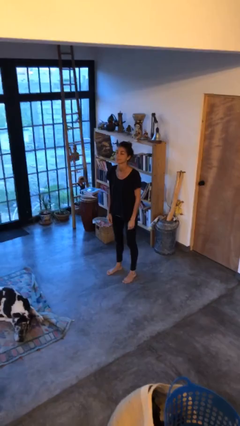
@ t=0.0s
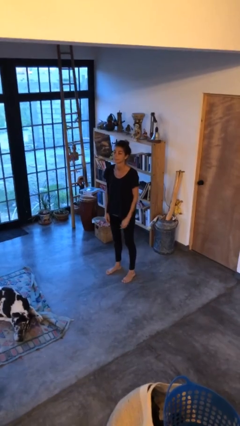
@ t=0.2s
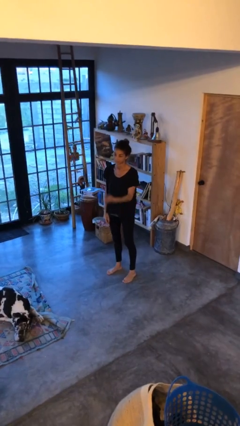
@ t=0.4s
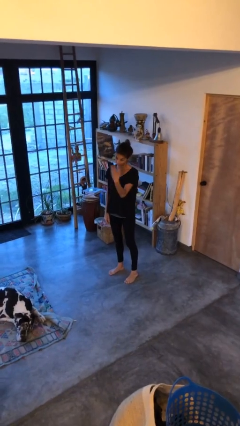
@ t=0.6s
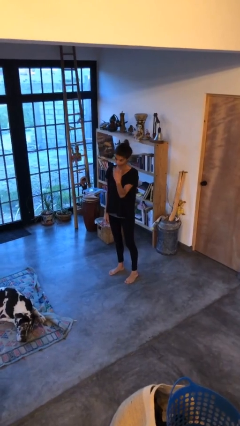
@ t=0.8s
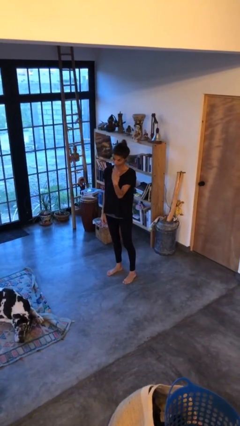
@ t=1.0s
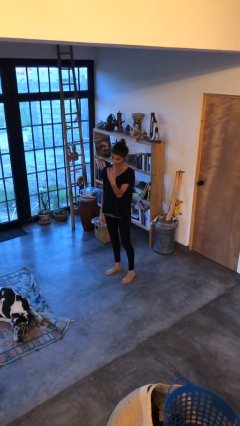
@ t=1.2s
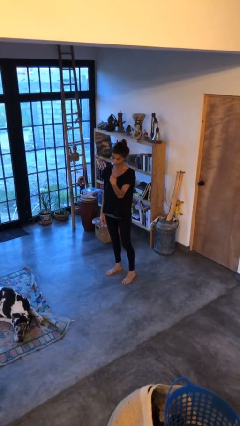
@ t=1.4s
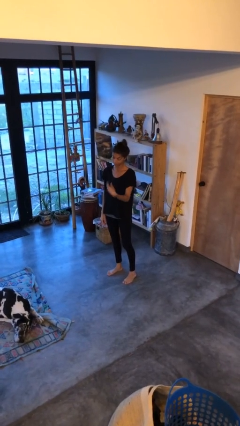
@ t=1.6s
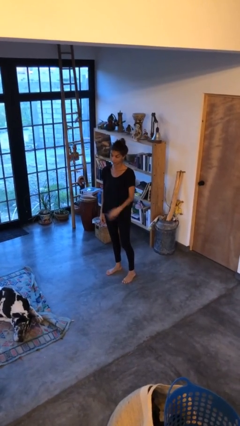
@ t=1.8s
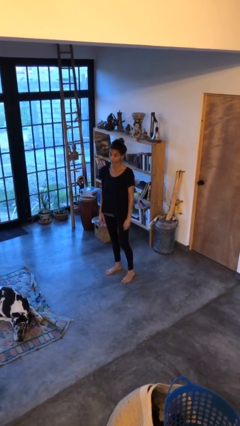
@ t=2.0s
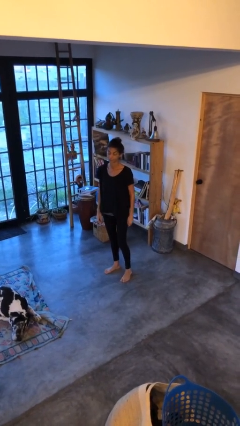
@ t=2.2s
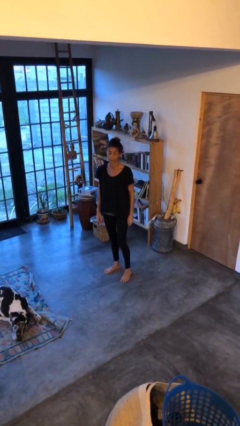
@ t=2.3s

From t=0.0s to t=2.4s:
person gestures come here

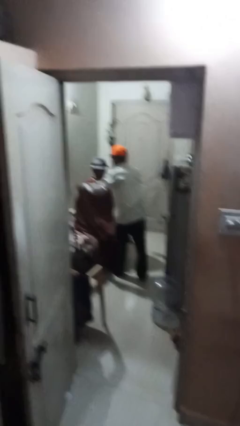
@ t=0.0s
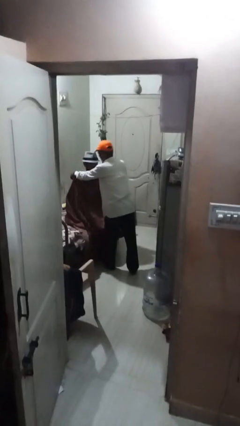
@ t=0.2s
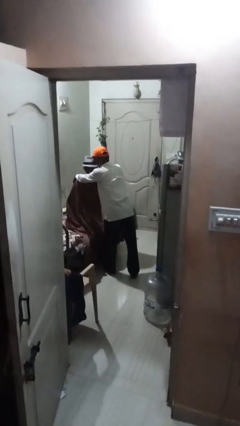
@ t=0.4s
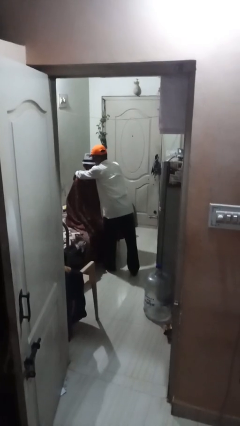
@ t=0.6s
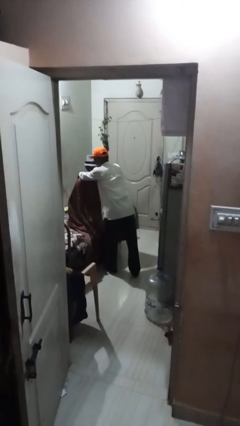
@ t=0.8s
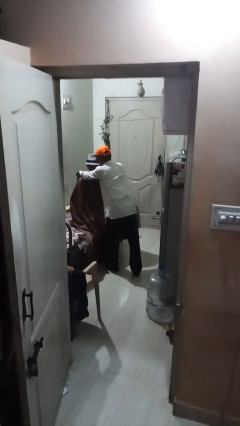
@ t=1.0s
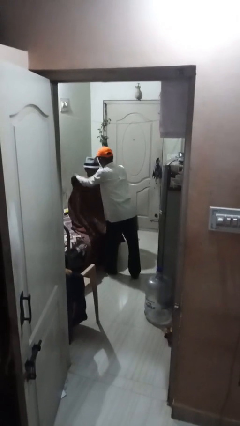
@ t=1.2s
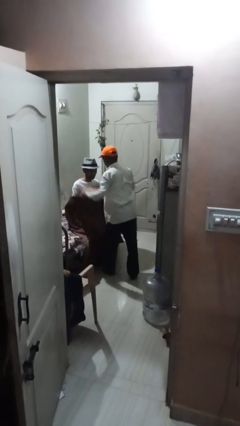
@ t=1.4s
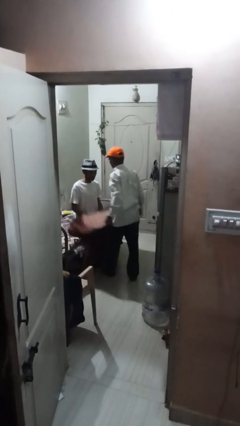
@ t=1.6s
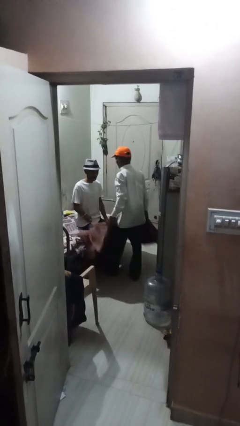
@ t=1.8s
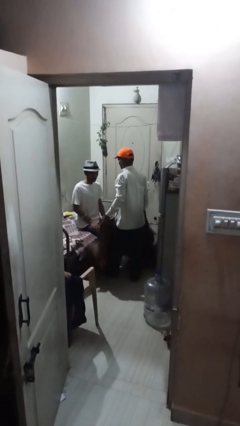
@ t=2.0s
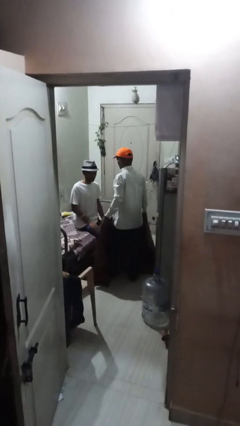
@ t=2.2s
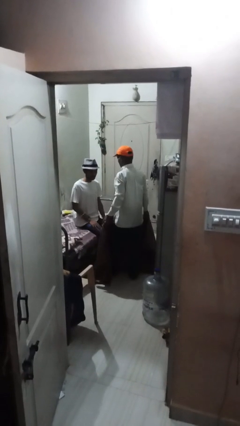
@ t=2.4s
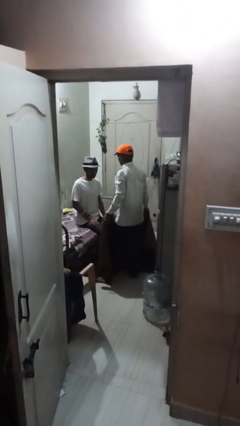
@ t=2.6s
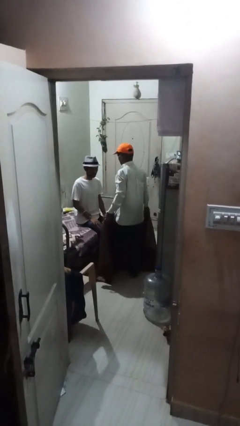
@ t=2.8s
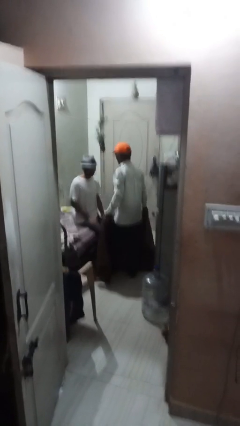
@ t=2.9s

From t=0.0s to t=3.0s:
person uncovers friend with blanket

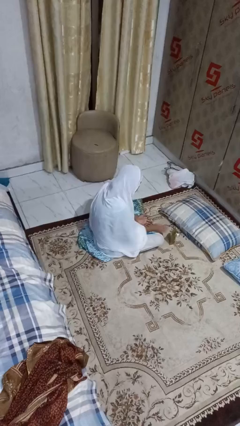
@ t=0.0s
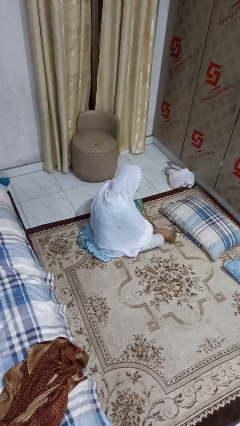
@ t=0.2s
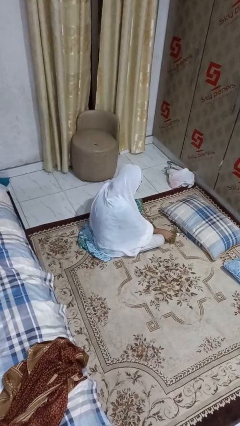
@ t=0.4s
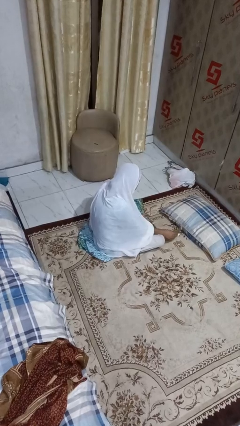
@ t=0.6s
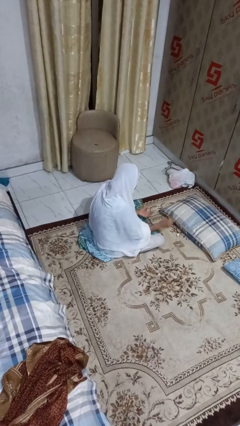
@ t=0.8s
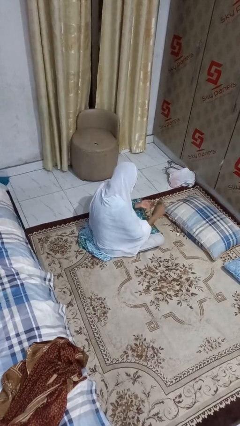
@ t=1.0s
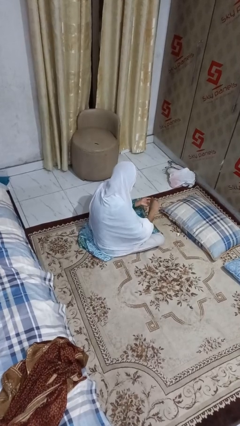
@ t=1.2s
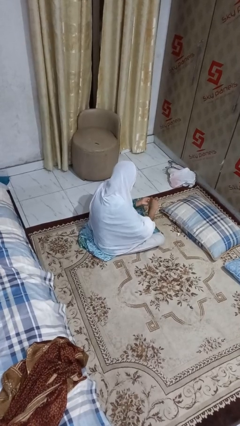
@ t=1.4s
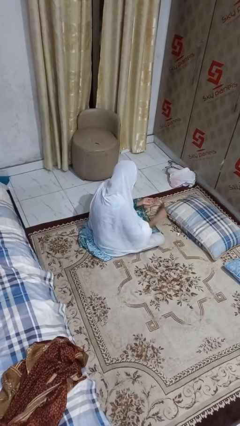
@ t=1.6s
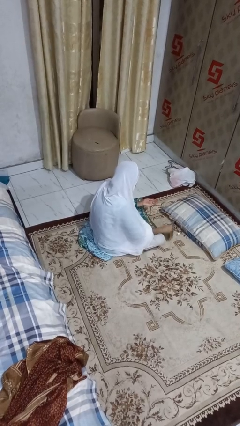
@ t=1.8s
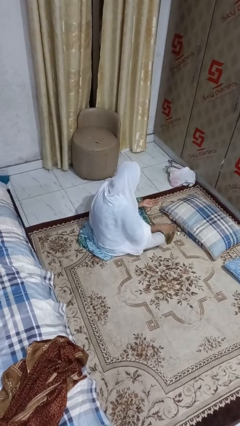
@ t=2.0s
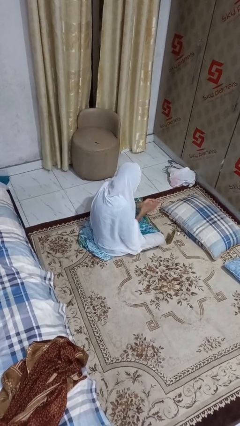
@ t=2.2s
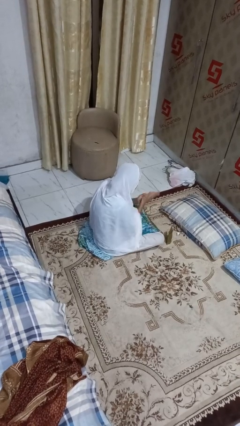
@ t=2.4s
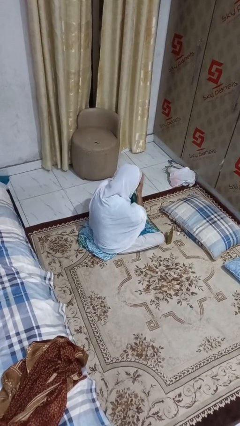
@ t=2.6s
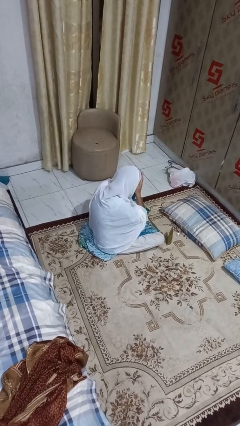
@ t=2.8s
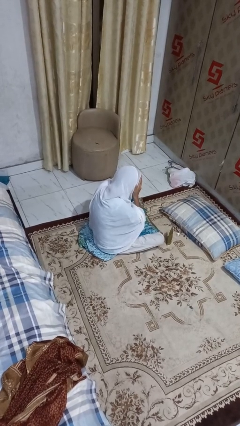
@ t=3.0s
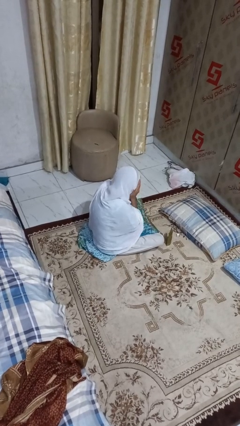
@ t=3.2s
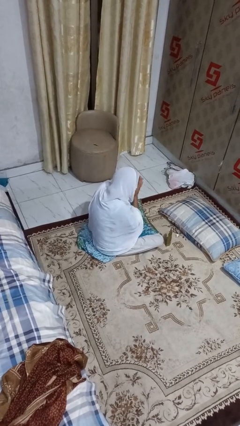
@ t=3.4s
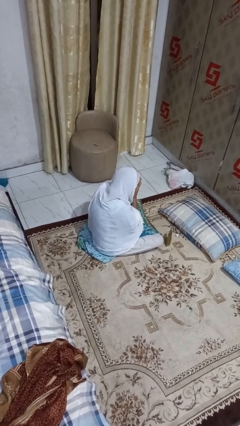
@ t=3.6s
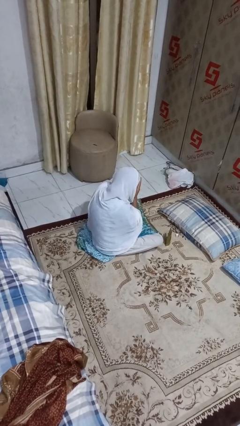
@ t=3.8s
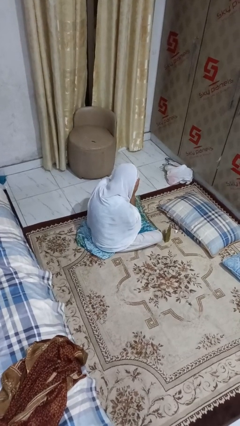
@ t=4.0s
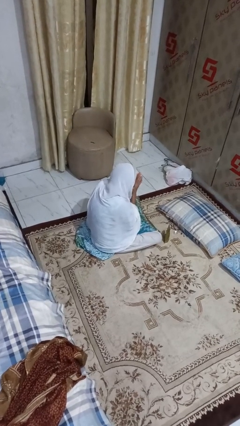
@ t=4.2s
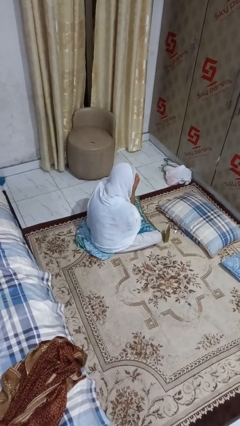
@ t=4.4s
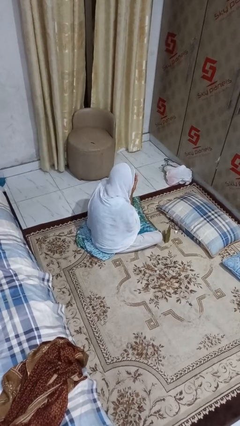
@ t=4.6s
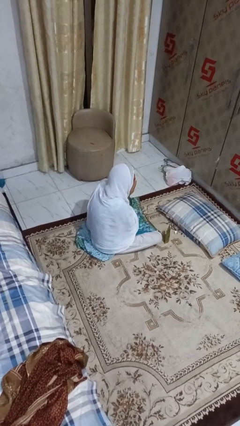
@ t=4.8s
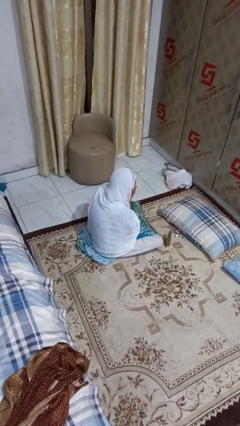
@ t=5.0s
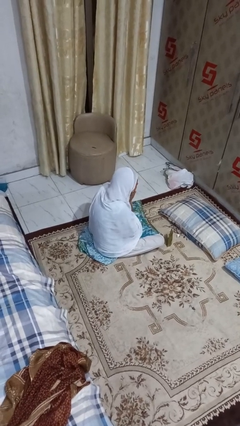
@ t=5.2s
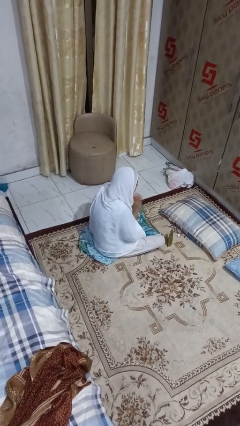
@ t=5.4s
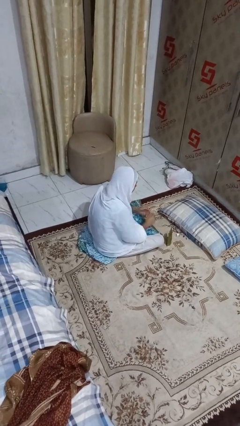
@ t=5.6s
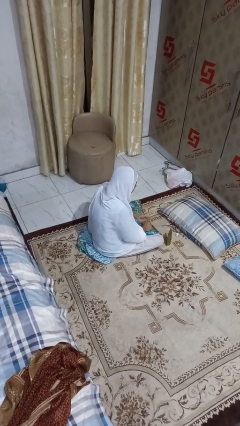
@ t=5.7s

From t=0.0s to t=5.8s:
person applies facial moisturizer

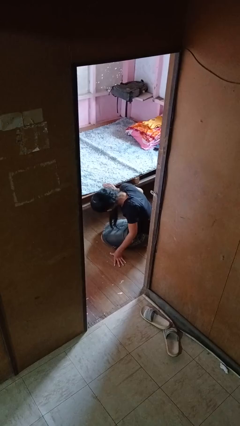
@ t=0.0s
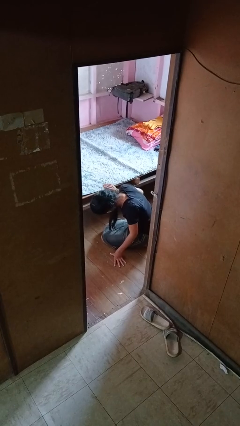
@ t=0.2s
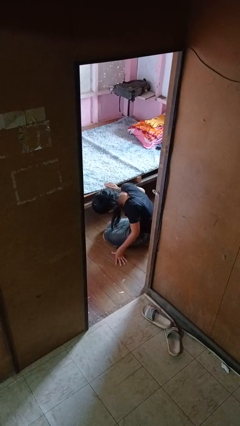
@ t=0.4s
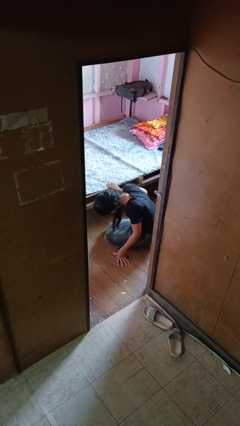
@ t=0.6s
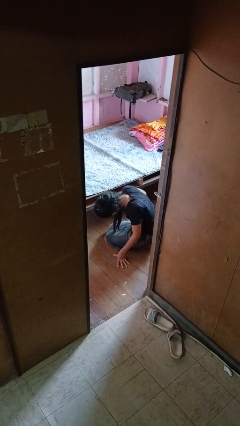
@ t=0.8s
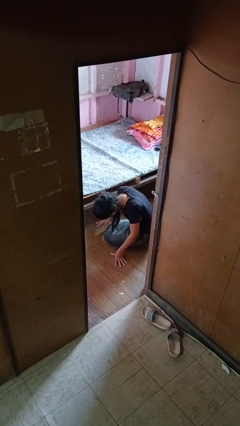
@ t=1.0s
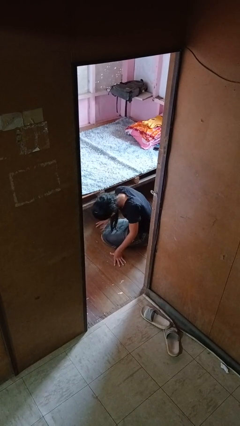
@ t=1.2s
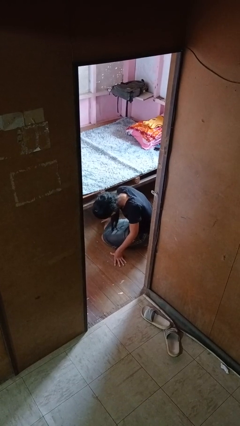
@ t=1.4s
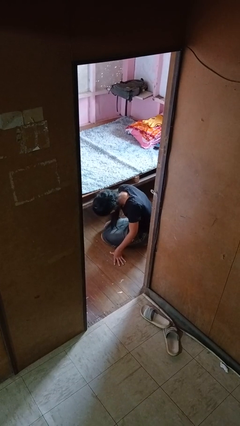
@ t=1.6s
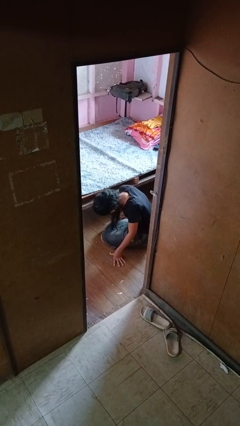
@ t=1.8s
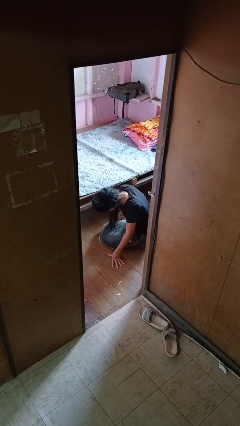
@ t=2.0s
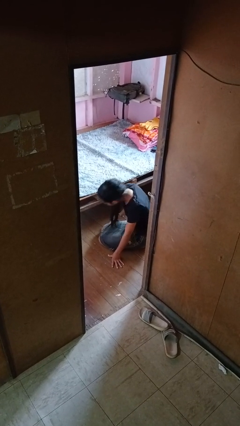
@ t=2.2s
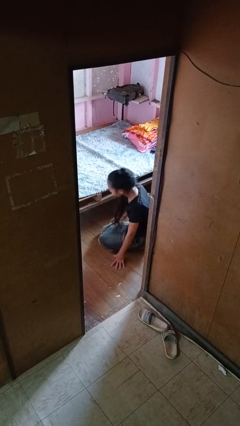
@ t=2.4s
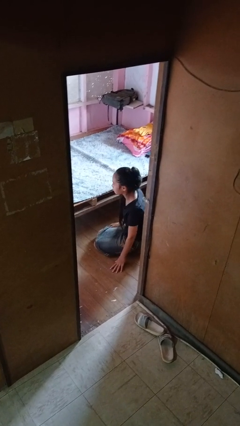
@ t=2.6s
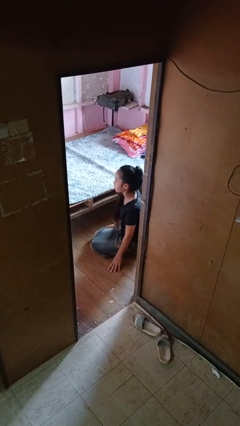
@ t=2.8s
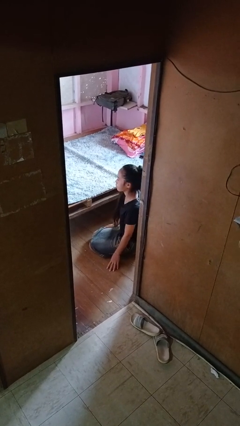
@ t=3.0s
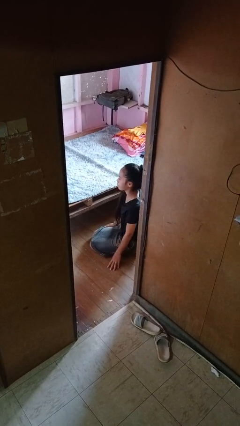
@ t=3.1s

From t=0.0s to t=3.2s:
person searches under bed

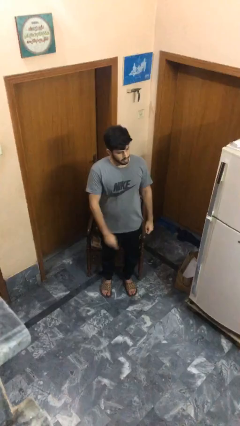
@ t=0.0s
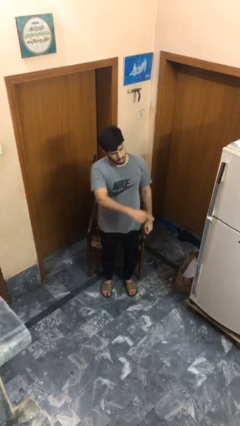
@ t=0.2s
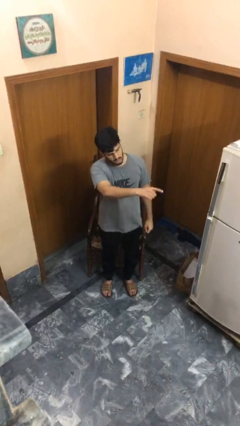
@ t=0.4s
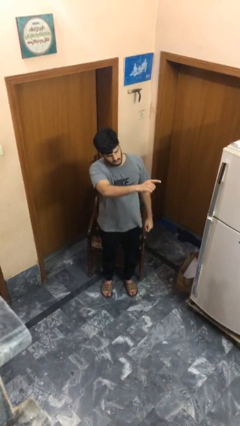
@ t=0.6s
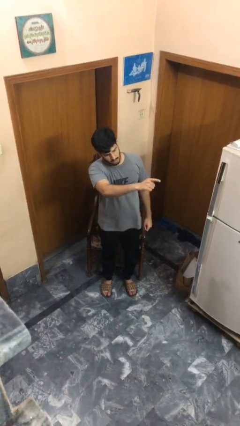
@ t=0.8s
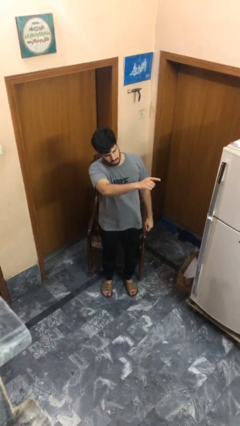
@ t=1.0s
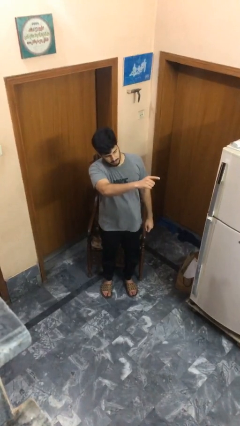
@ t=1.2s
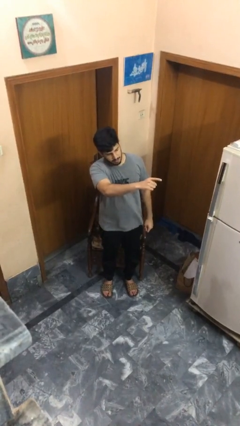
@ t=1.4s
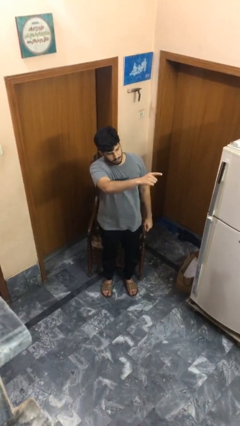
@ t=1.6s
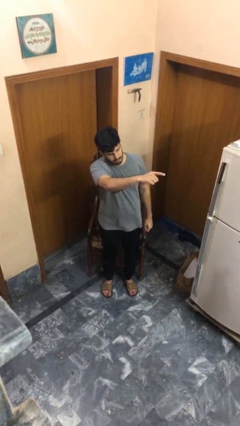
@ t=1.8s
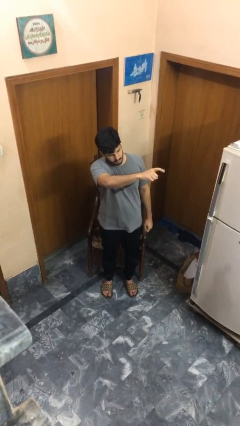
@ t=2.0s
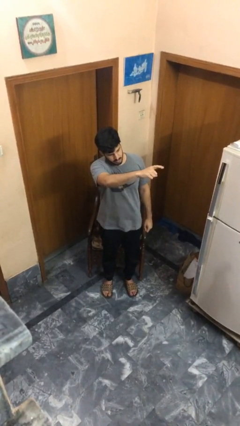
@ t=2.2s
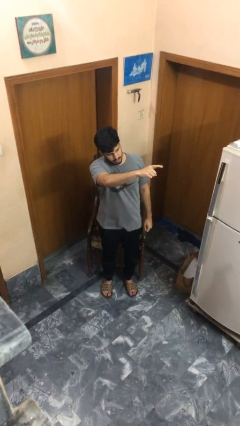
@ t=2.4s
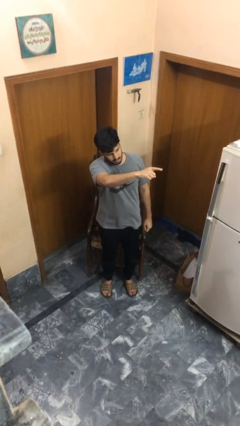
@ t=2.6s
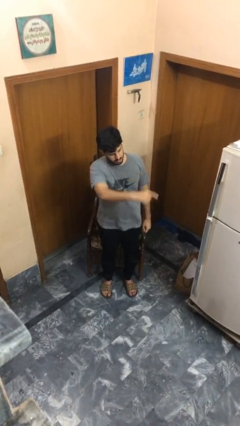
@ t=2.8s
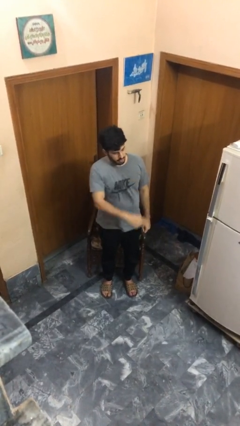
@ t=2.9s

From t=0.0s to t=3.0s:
person points at person
